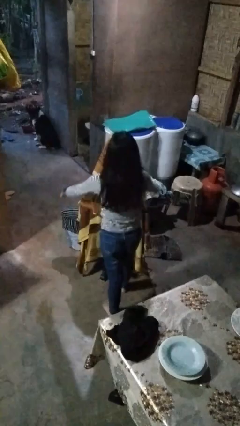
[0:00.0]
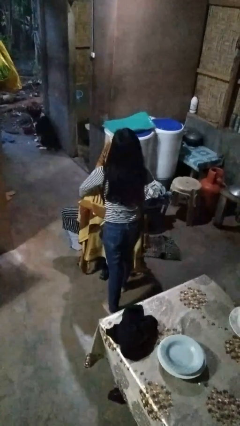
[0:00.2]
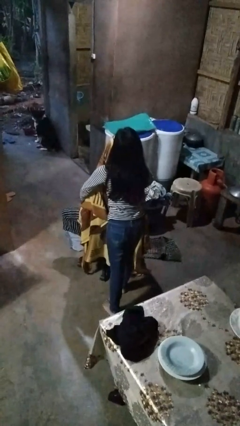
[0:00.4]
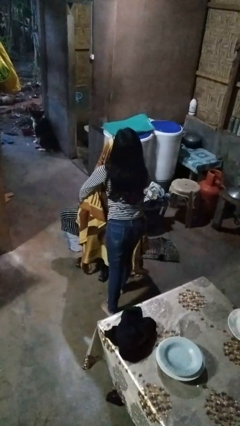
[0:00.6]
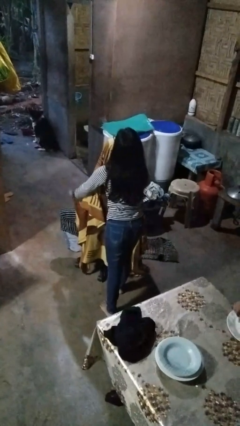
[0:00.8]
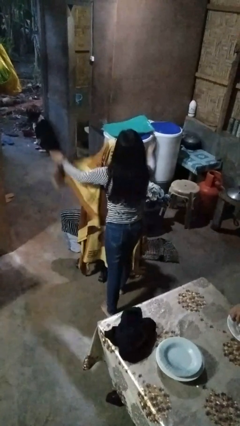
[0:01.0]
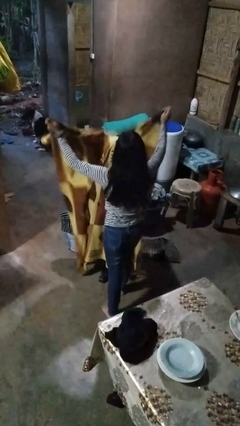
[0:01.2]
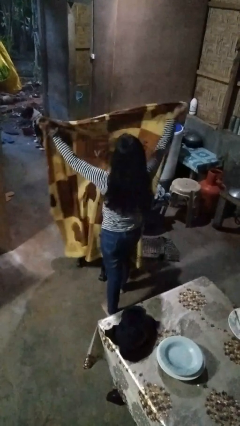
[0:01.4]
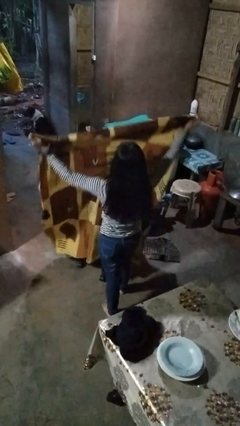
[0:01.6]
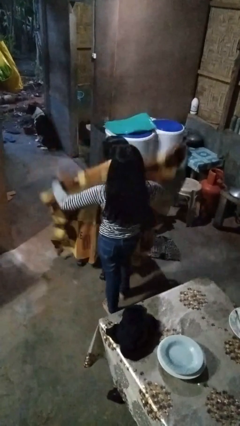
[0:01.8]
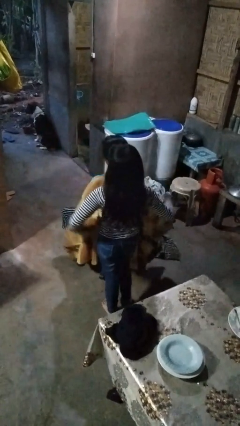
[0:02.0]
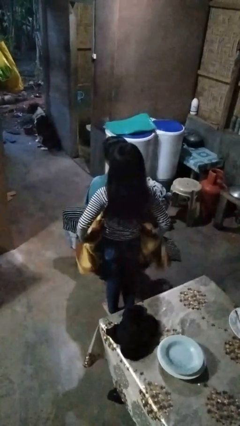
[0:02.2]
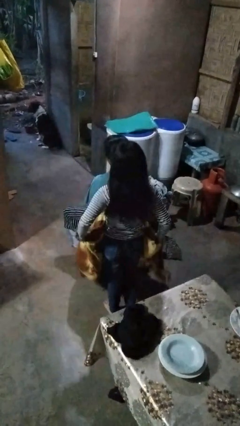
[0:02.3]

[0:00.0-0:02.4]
person uncovers friend with blanket

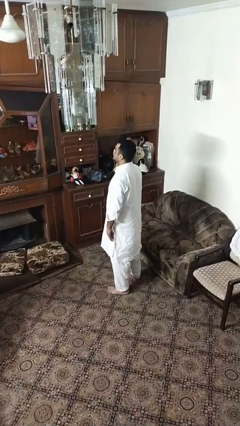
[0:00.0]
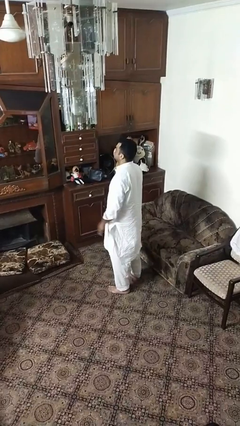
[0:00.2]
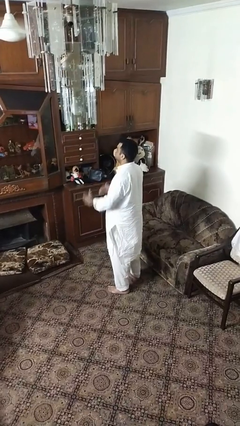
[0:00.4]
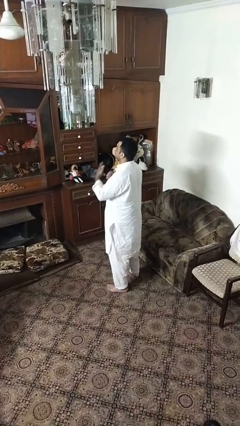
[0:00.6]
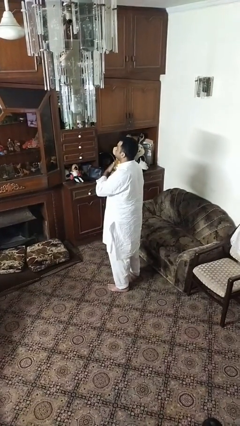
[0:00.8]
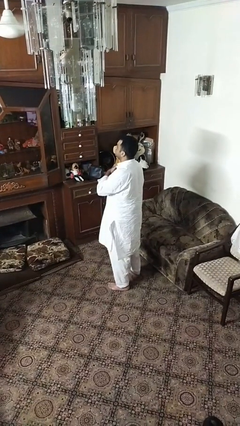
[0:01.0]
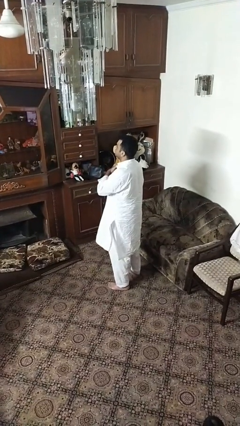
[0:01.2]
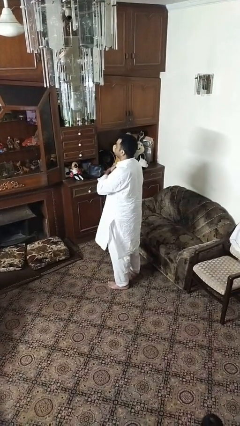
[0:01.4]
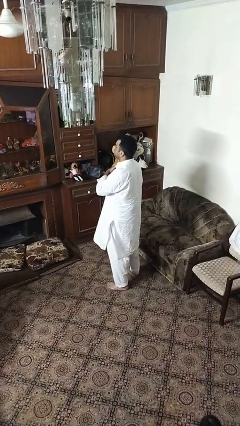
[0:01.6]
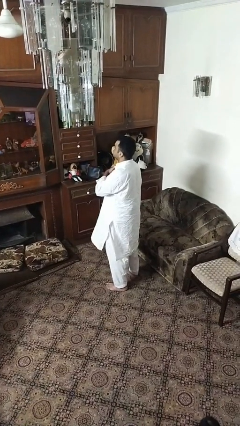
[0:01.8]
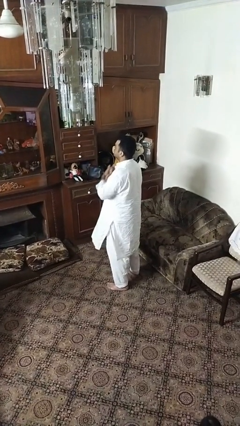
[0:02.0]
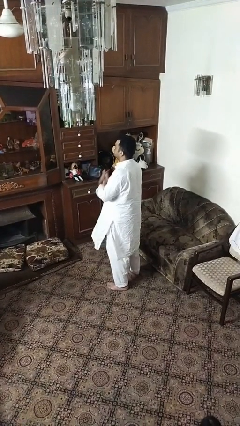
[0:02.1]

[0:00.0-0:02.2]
person gestures arms x

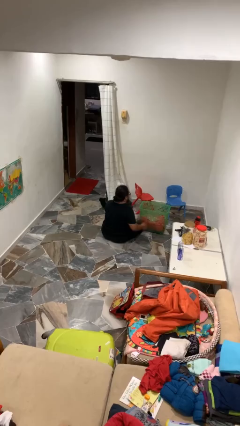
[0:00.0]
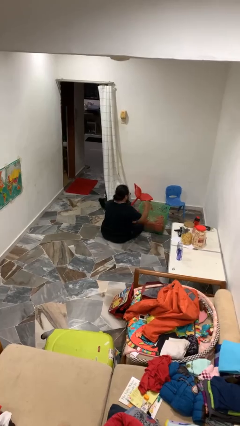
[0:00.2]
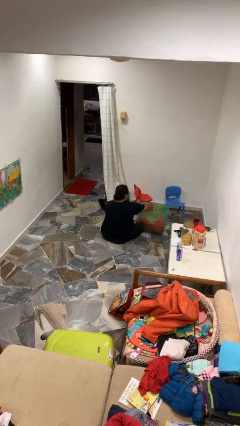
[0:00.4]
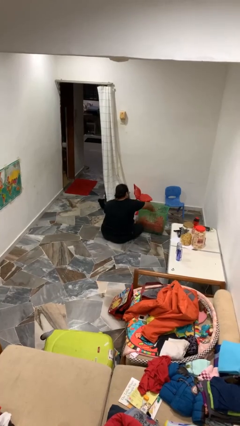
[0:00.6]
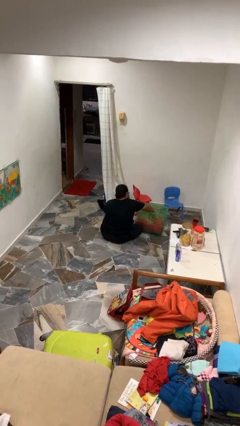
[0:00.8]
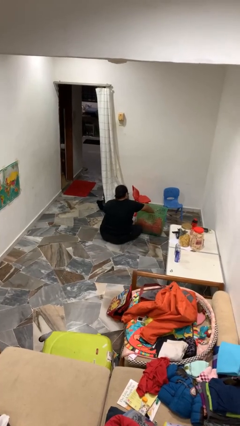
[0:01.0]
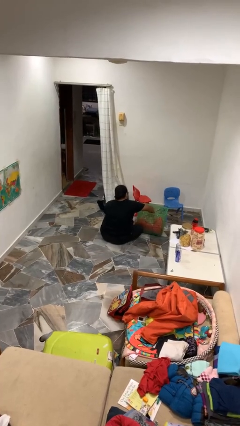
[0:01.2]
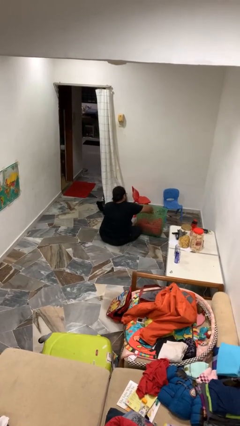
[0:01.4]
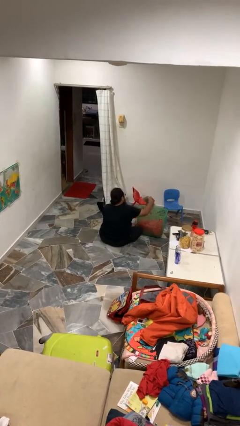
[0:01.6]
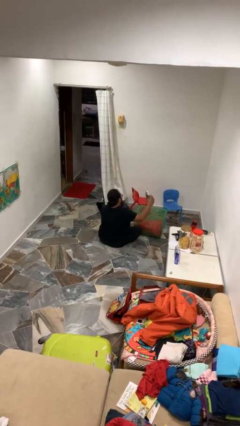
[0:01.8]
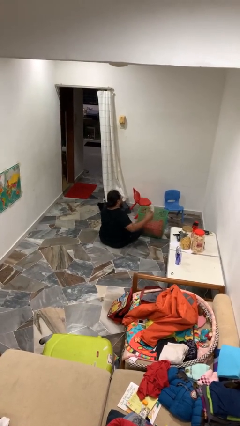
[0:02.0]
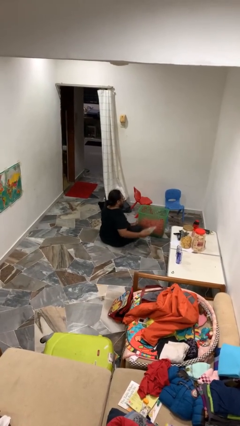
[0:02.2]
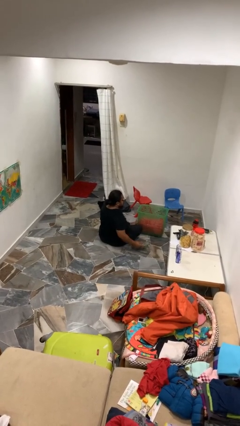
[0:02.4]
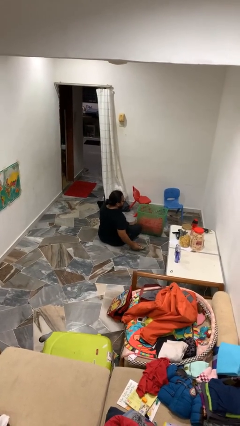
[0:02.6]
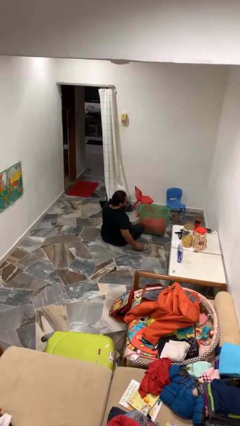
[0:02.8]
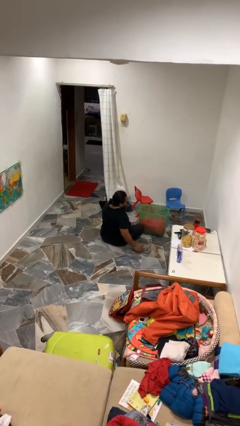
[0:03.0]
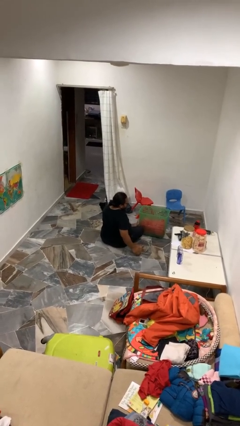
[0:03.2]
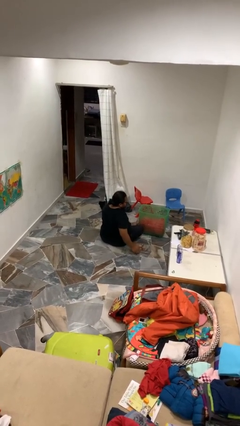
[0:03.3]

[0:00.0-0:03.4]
person takes object from basket

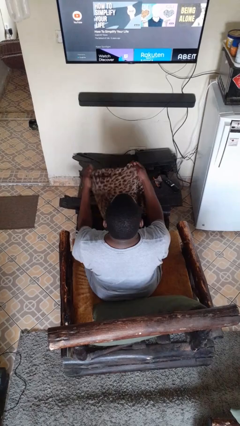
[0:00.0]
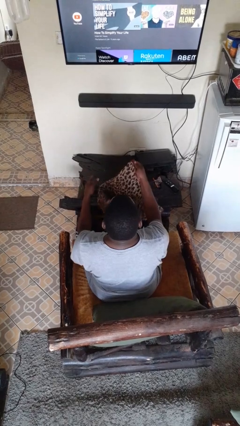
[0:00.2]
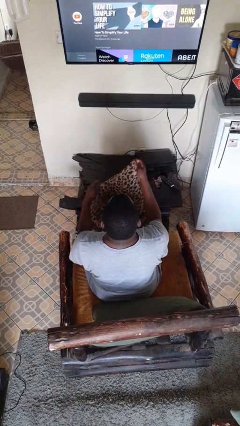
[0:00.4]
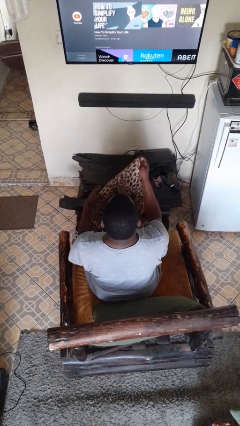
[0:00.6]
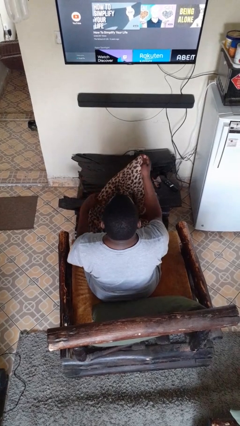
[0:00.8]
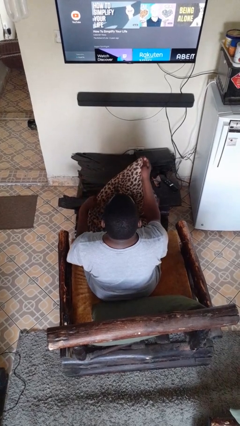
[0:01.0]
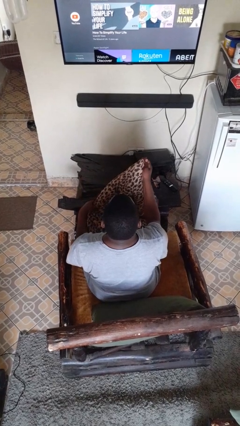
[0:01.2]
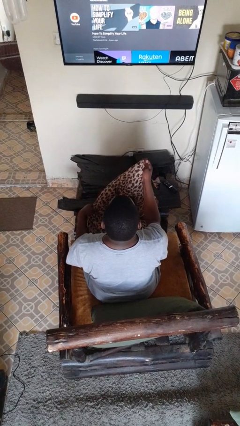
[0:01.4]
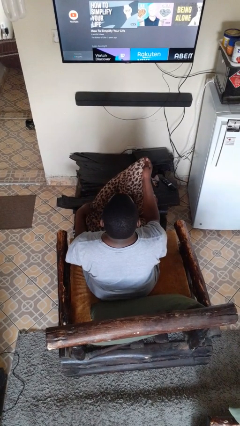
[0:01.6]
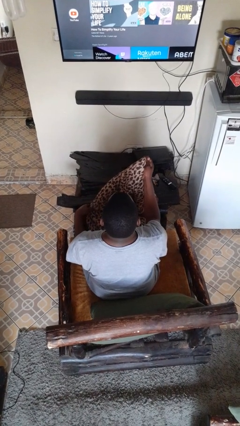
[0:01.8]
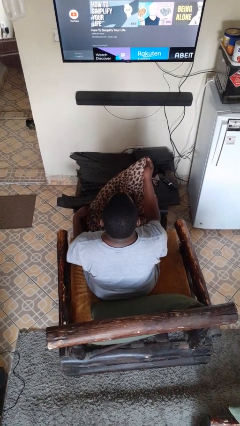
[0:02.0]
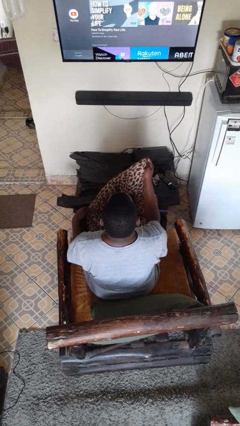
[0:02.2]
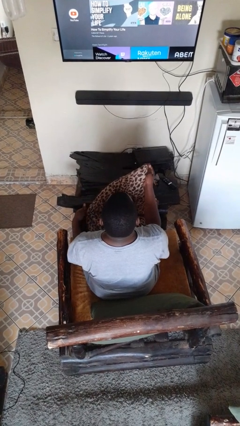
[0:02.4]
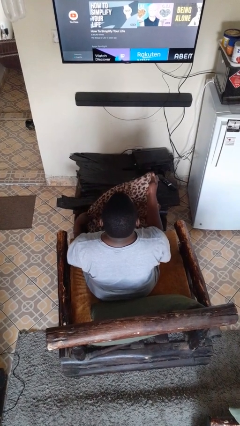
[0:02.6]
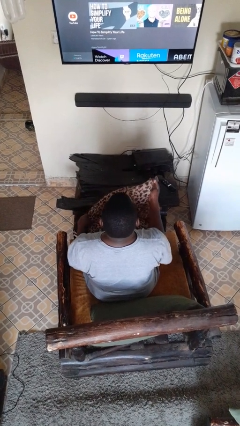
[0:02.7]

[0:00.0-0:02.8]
person unfolds blanket

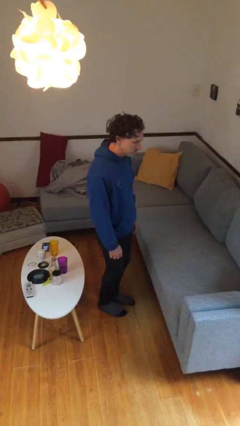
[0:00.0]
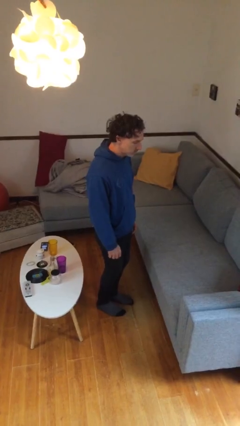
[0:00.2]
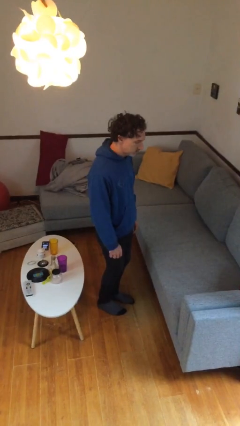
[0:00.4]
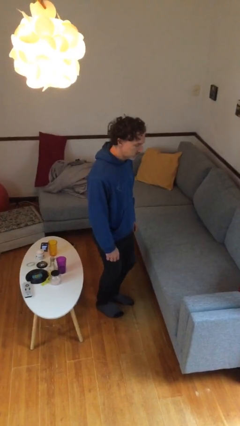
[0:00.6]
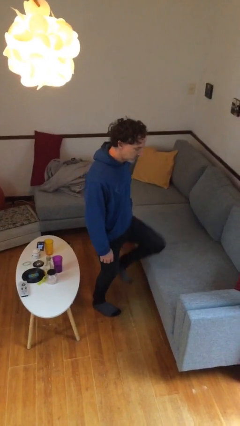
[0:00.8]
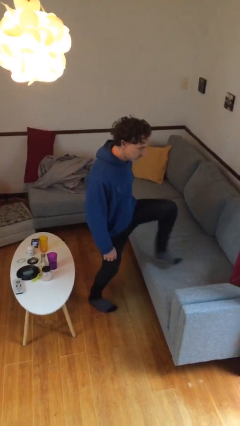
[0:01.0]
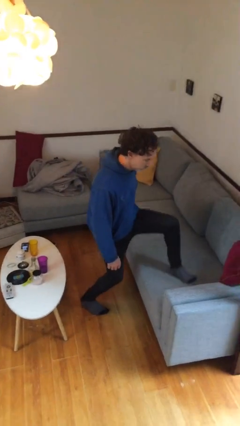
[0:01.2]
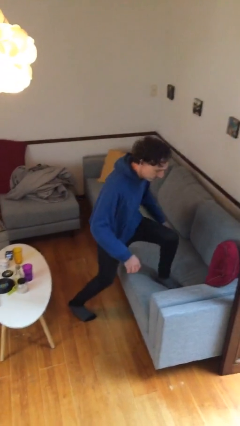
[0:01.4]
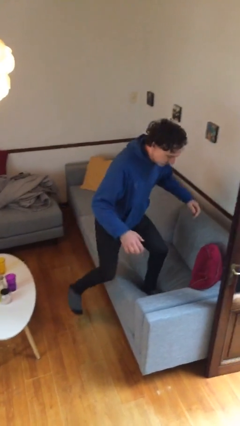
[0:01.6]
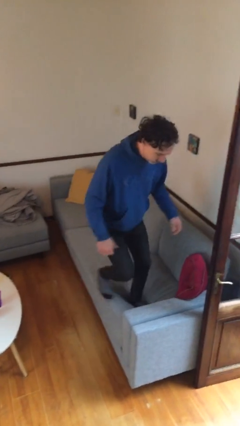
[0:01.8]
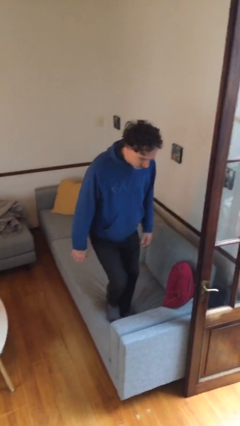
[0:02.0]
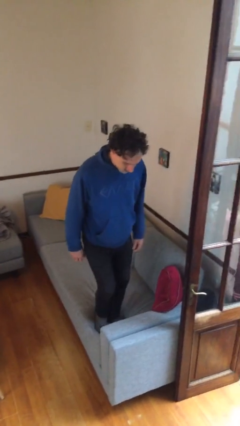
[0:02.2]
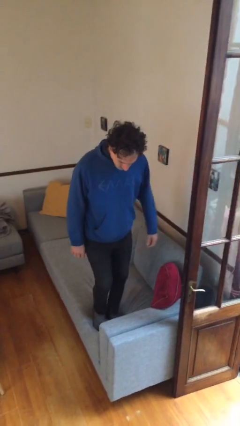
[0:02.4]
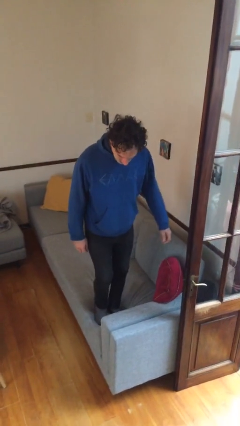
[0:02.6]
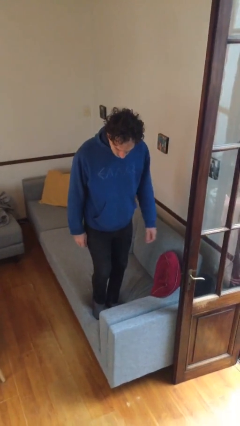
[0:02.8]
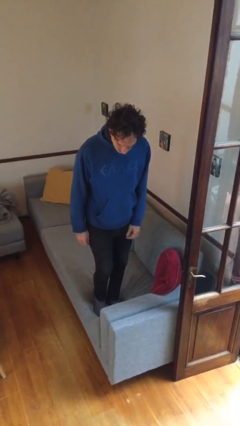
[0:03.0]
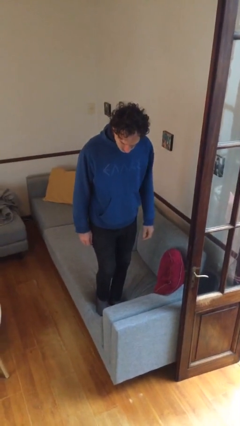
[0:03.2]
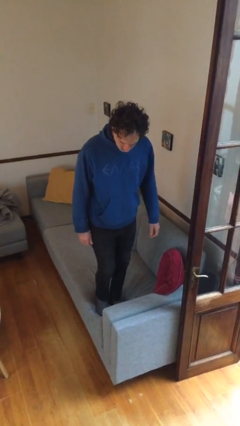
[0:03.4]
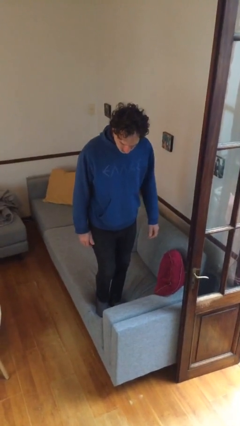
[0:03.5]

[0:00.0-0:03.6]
person climbs on couch

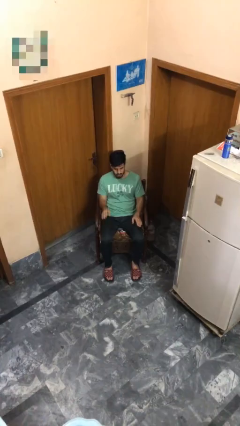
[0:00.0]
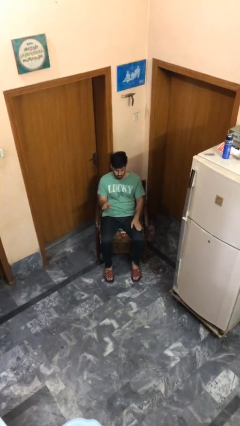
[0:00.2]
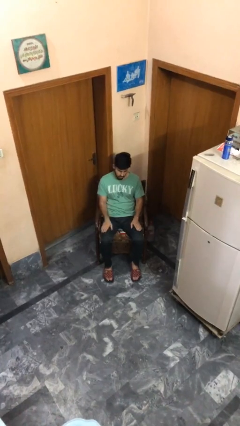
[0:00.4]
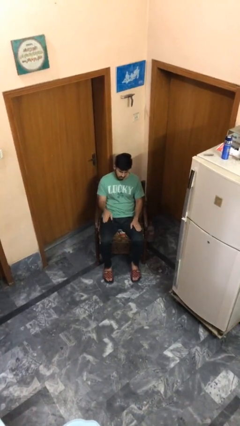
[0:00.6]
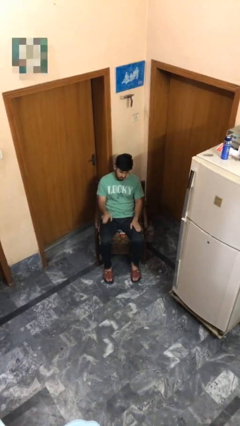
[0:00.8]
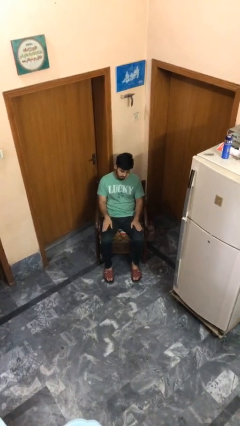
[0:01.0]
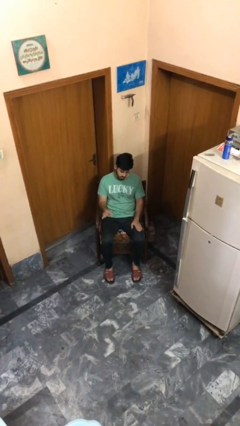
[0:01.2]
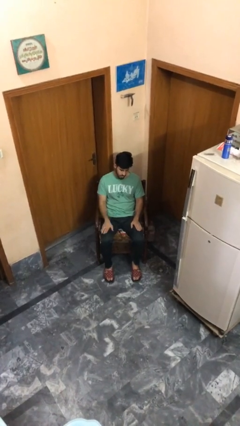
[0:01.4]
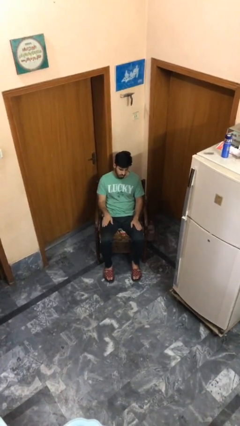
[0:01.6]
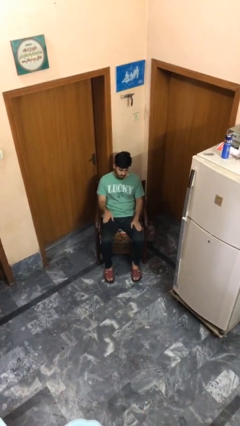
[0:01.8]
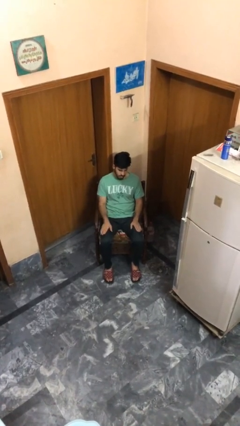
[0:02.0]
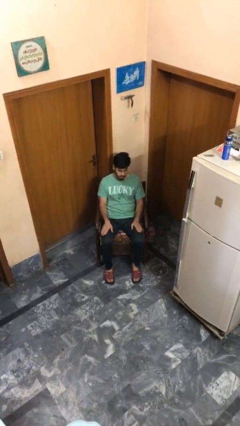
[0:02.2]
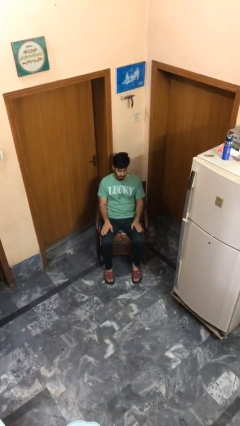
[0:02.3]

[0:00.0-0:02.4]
person slaps hands on thighs

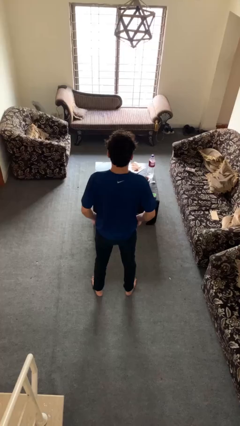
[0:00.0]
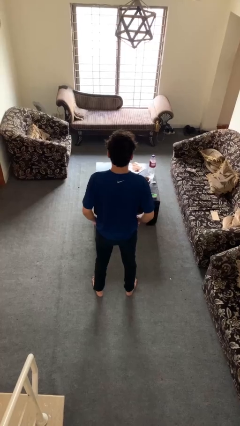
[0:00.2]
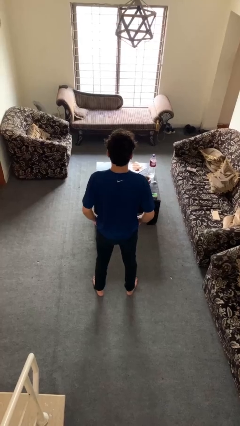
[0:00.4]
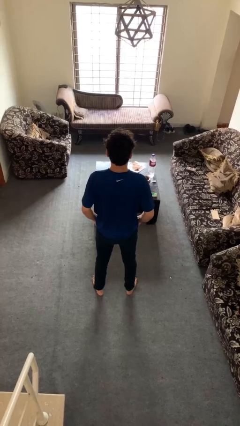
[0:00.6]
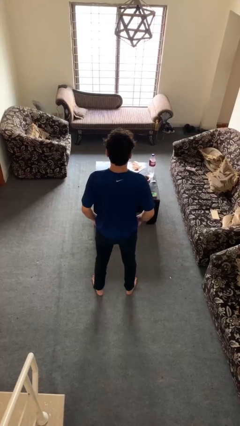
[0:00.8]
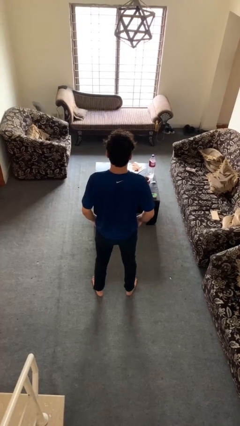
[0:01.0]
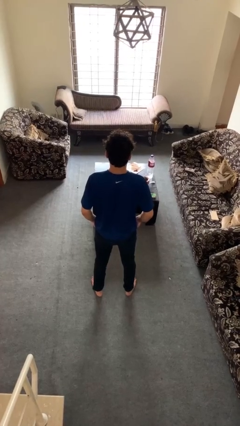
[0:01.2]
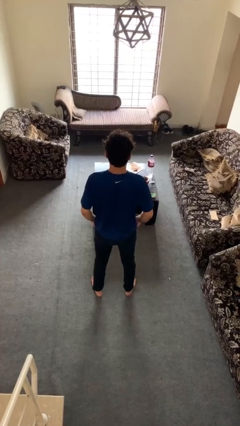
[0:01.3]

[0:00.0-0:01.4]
person puts hands in back pockets
